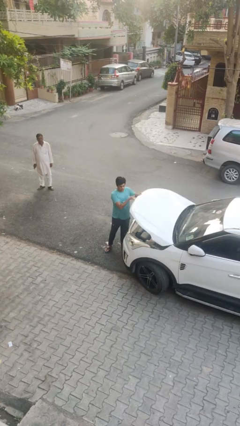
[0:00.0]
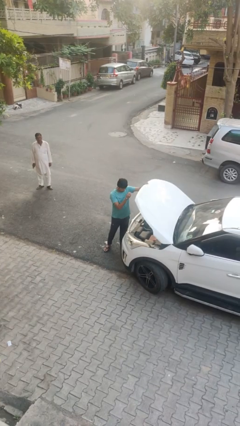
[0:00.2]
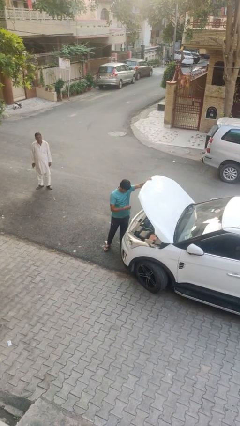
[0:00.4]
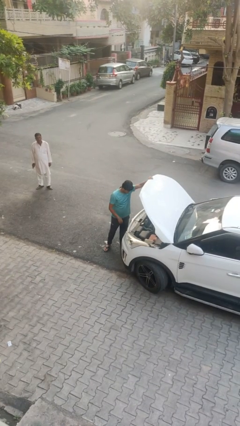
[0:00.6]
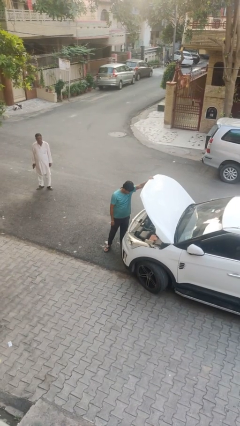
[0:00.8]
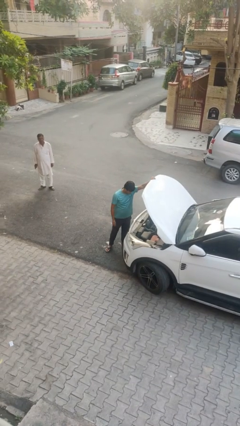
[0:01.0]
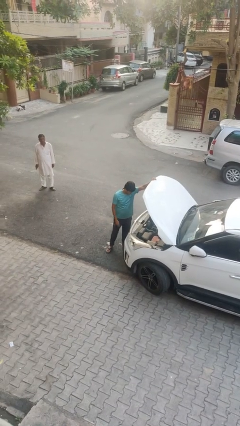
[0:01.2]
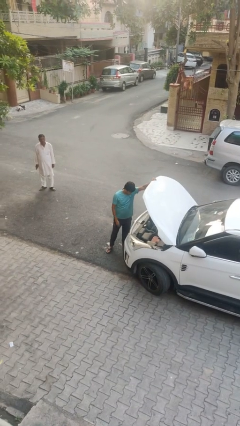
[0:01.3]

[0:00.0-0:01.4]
person opens car hood

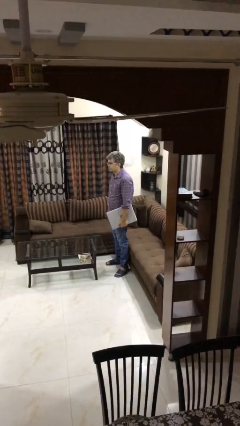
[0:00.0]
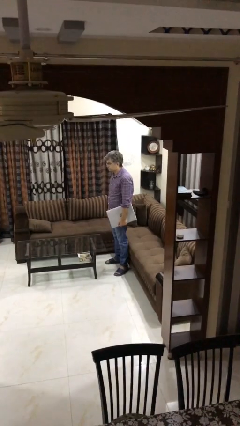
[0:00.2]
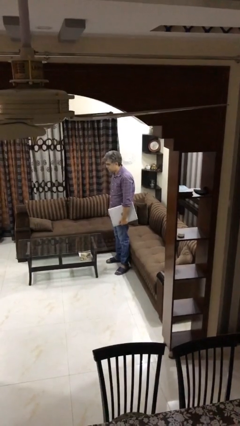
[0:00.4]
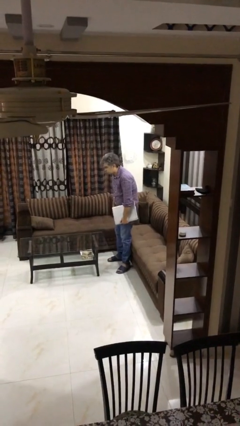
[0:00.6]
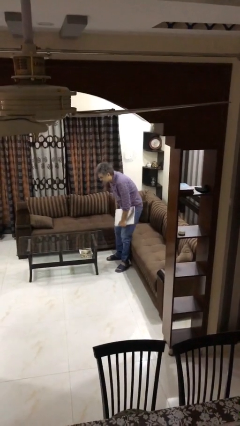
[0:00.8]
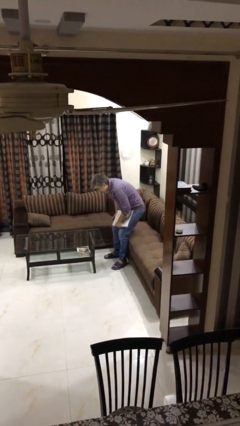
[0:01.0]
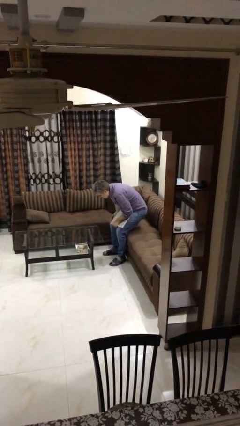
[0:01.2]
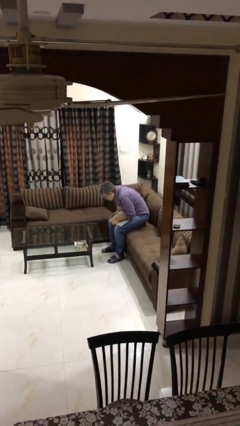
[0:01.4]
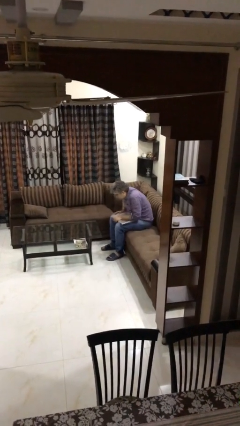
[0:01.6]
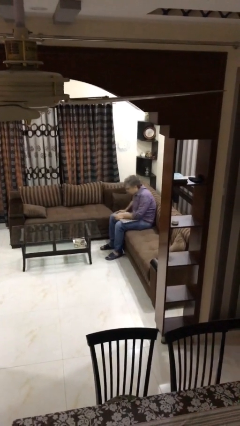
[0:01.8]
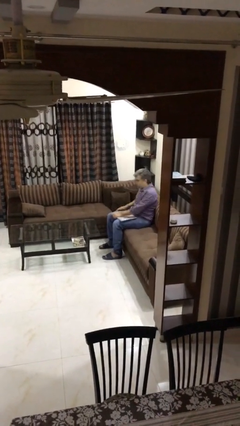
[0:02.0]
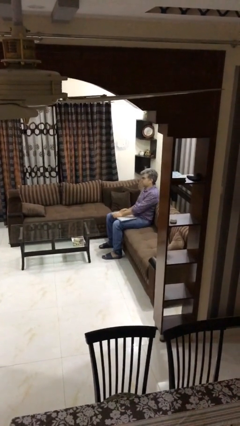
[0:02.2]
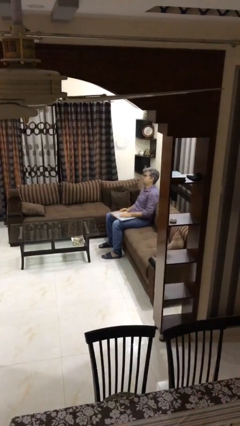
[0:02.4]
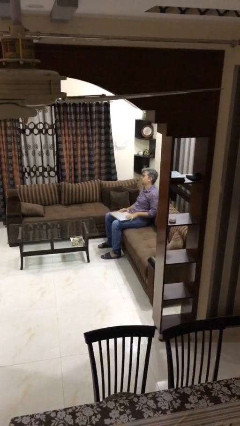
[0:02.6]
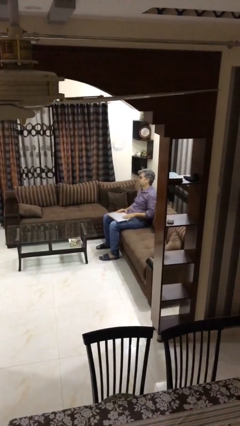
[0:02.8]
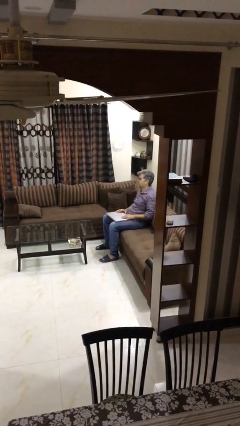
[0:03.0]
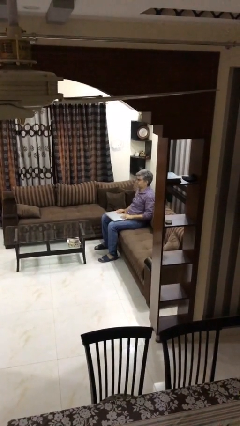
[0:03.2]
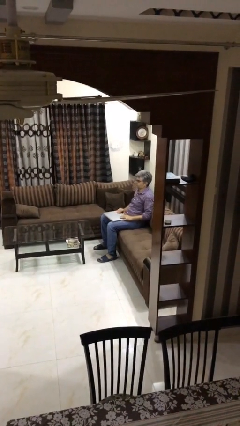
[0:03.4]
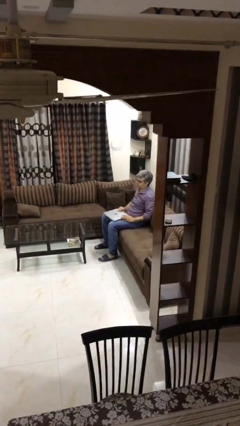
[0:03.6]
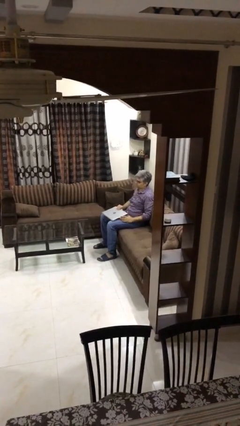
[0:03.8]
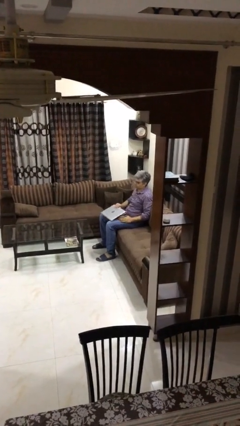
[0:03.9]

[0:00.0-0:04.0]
person sits down

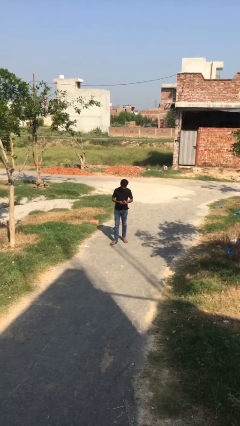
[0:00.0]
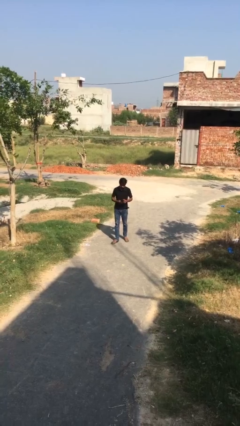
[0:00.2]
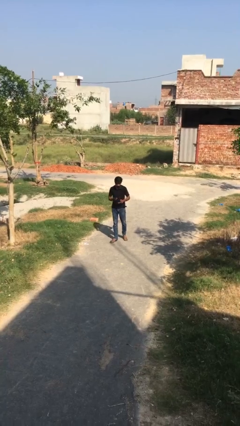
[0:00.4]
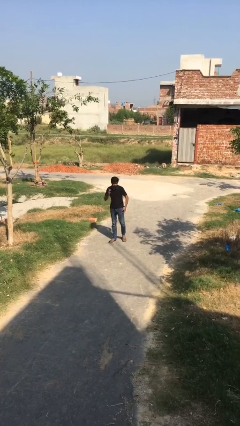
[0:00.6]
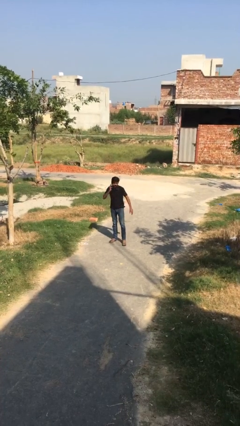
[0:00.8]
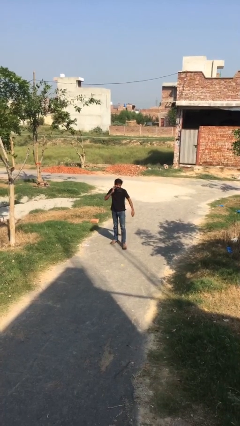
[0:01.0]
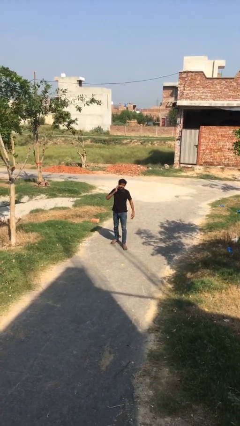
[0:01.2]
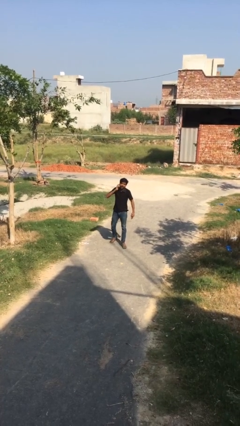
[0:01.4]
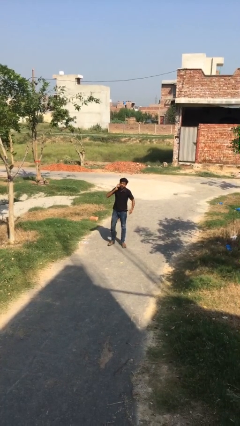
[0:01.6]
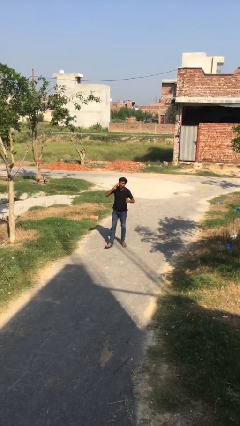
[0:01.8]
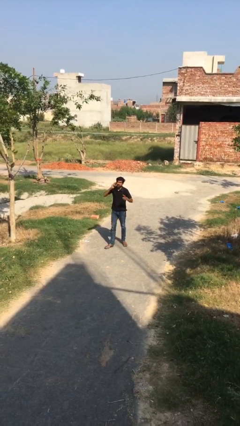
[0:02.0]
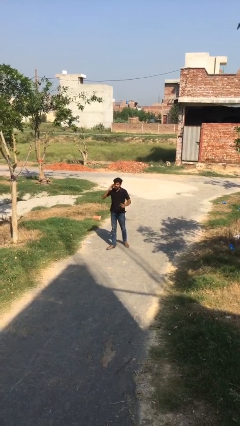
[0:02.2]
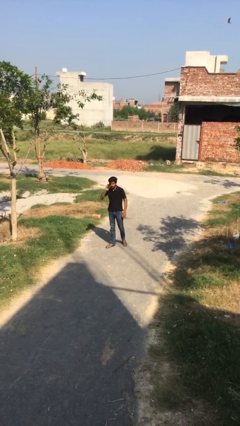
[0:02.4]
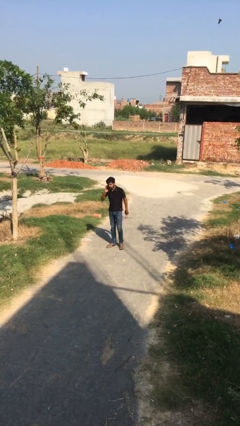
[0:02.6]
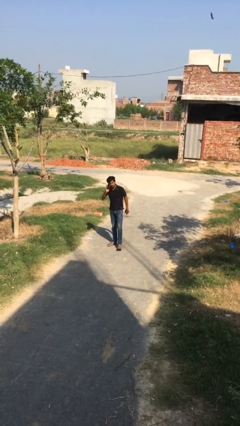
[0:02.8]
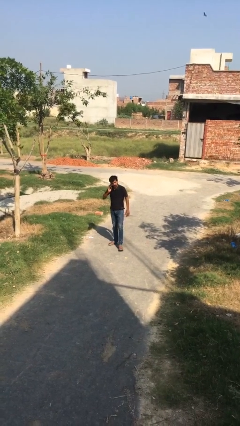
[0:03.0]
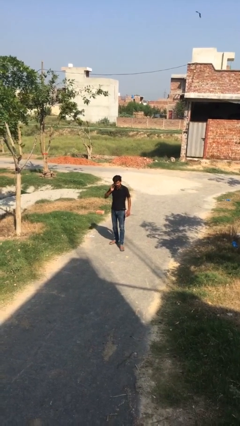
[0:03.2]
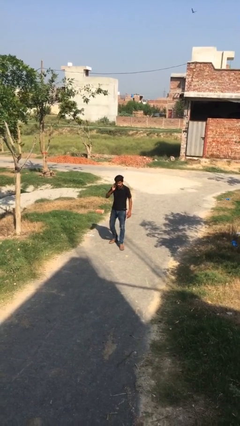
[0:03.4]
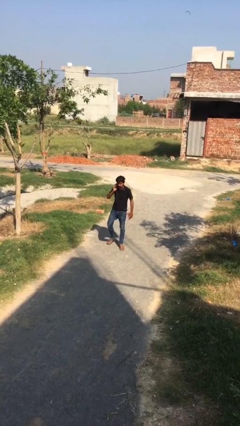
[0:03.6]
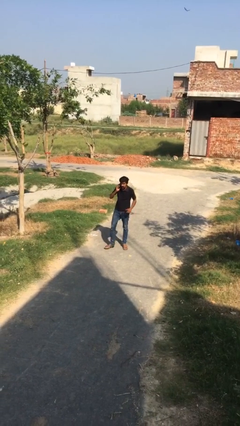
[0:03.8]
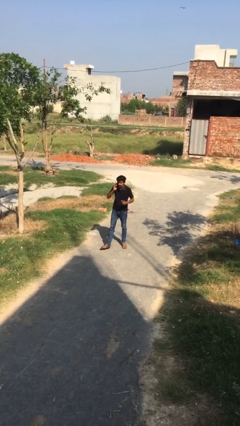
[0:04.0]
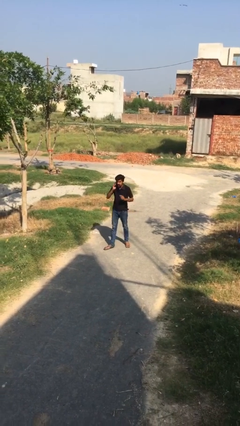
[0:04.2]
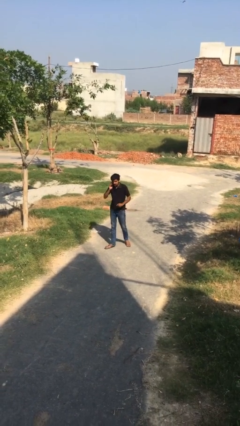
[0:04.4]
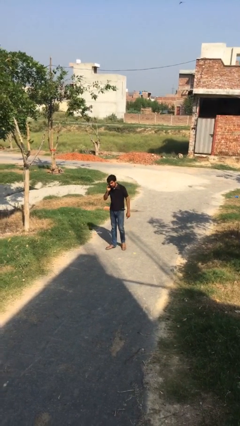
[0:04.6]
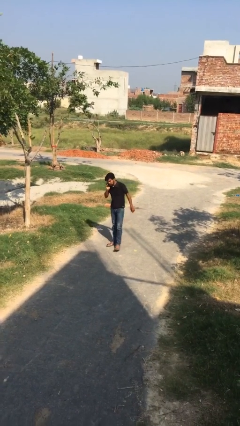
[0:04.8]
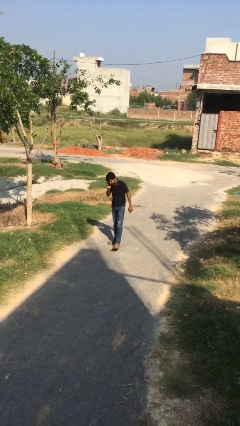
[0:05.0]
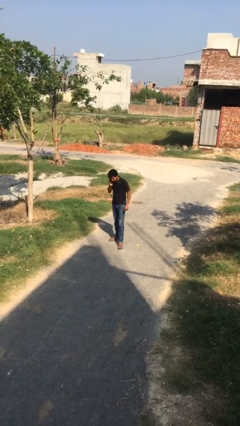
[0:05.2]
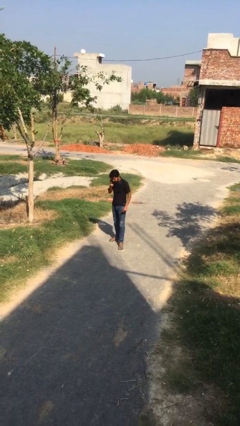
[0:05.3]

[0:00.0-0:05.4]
person talks on phone

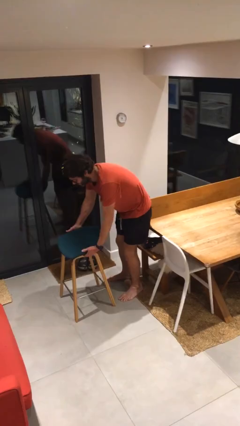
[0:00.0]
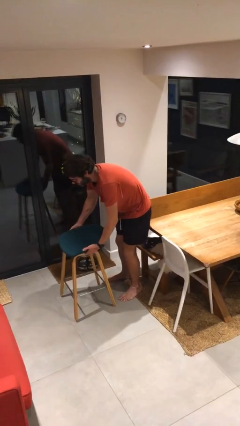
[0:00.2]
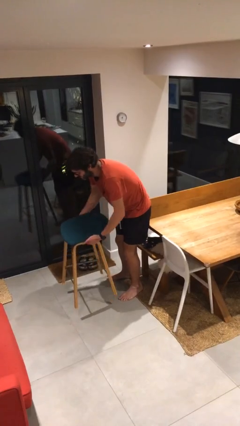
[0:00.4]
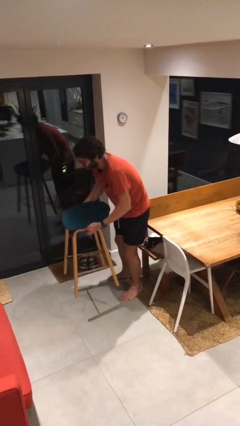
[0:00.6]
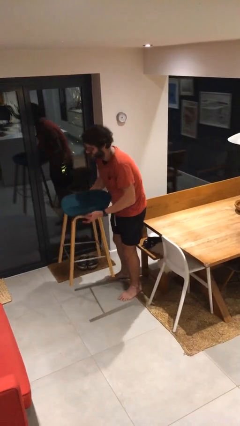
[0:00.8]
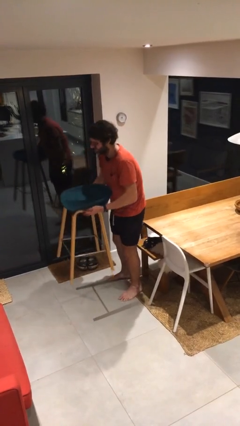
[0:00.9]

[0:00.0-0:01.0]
person picks up object from floor

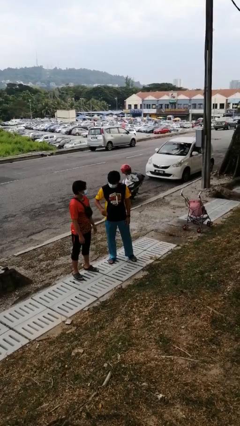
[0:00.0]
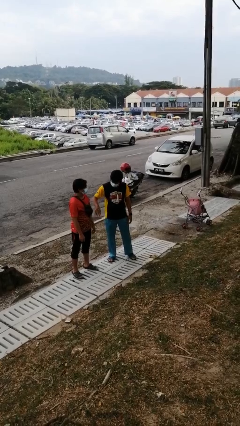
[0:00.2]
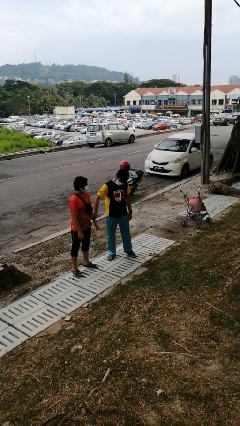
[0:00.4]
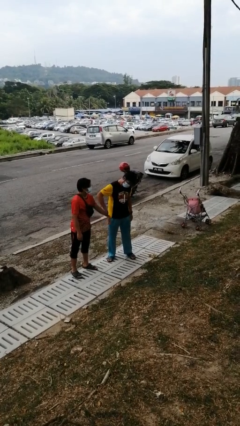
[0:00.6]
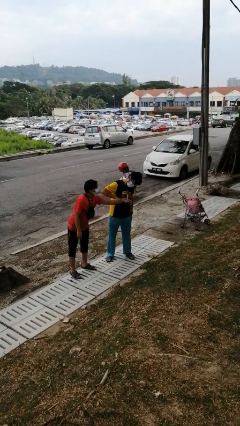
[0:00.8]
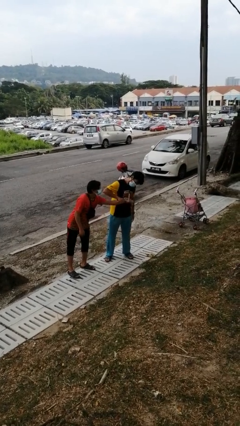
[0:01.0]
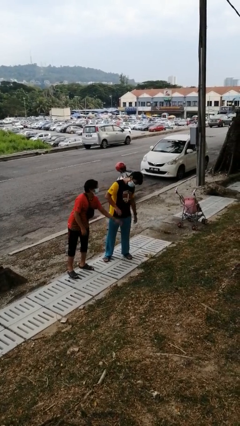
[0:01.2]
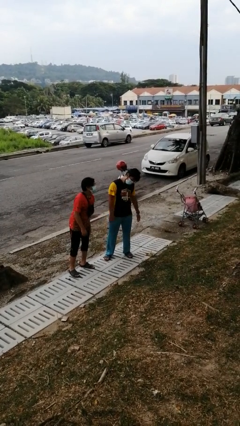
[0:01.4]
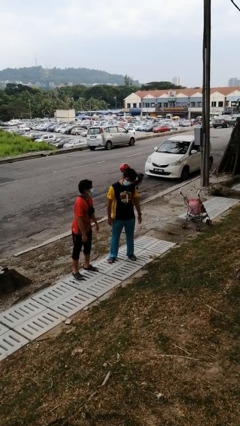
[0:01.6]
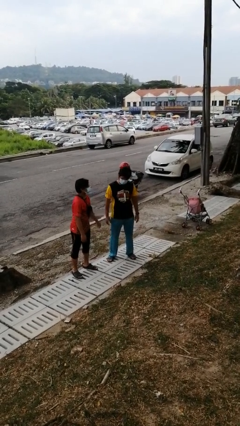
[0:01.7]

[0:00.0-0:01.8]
person grabs person by forearm

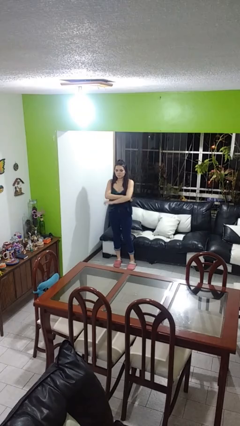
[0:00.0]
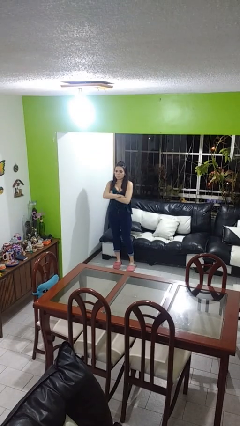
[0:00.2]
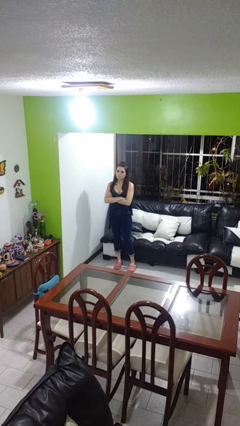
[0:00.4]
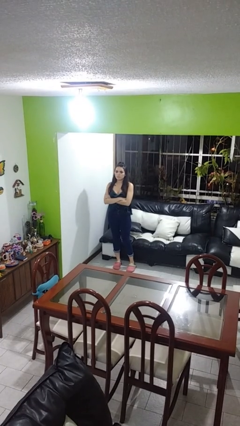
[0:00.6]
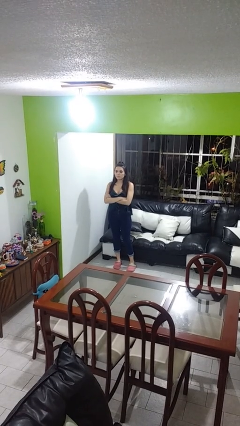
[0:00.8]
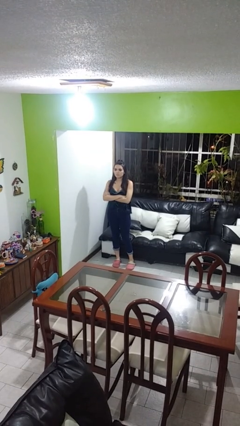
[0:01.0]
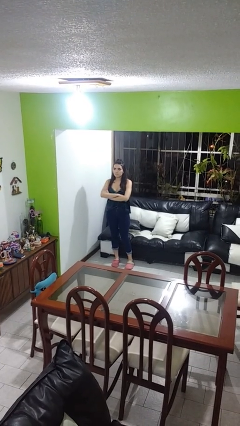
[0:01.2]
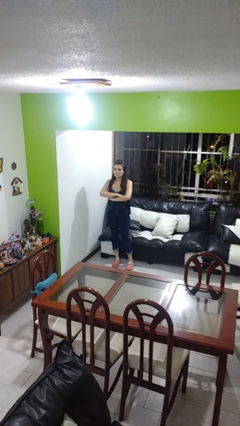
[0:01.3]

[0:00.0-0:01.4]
person crosses arms

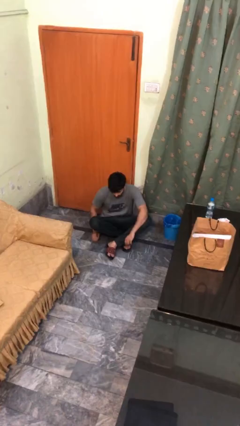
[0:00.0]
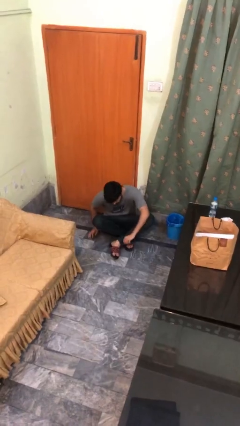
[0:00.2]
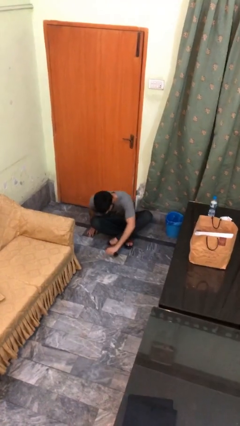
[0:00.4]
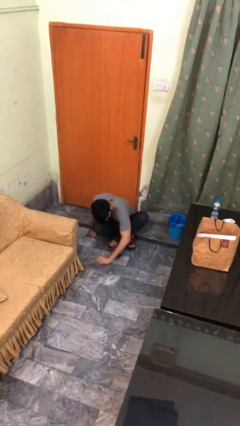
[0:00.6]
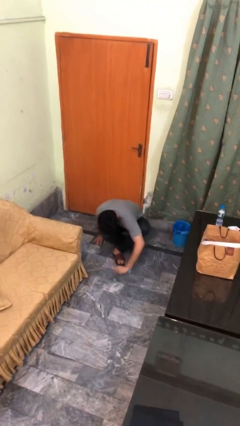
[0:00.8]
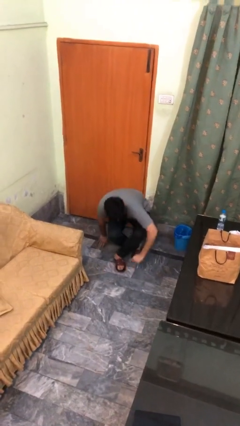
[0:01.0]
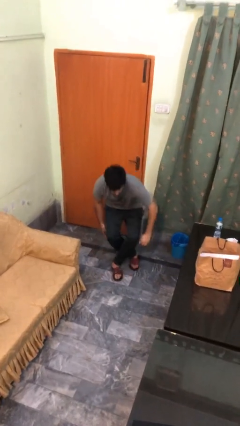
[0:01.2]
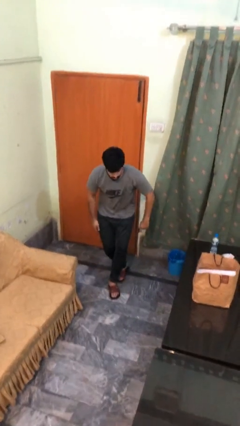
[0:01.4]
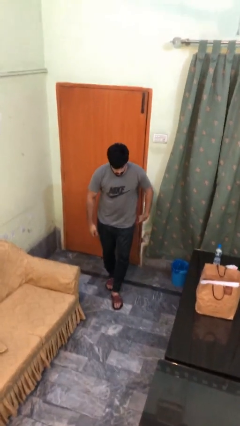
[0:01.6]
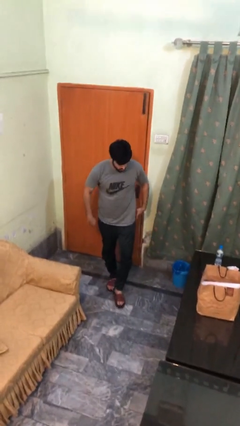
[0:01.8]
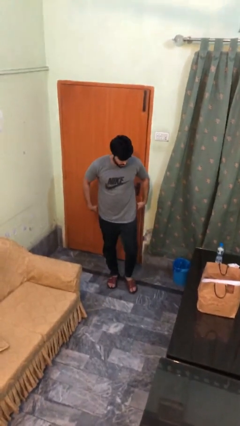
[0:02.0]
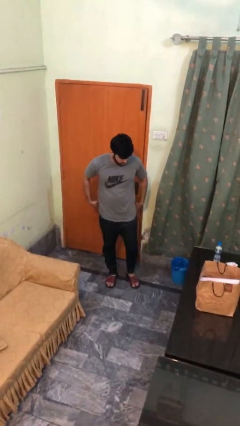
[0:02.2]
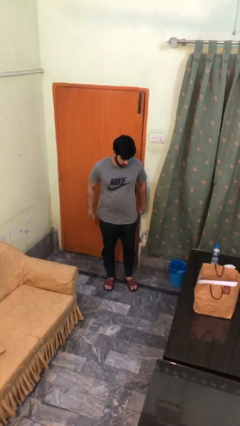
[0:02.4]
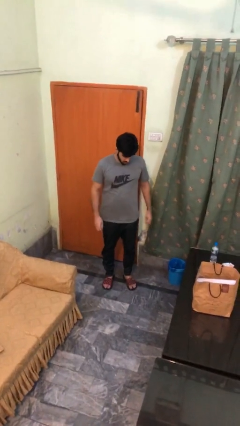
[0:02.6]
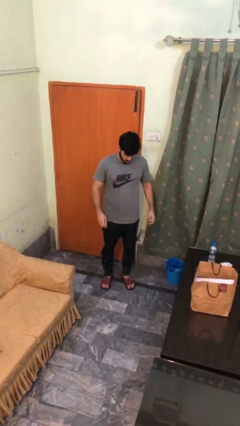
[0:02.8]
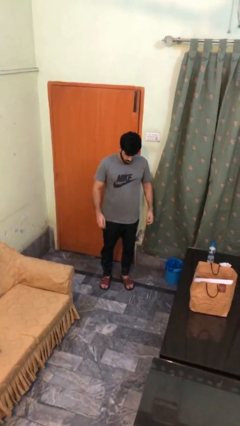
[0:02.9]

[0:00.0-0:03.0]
person stands up from floor
